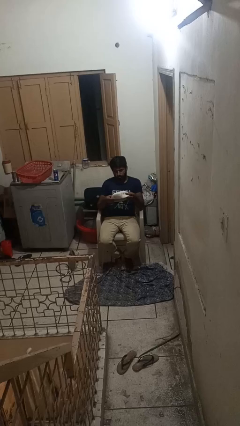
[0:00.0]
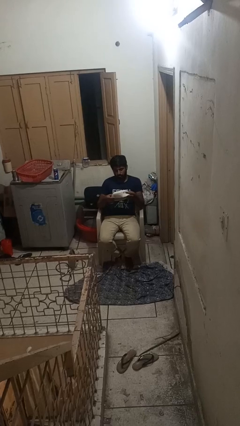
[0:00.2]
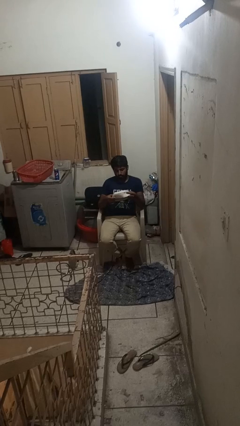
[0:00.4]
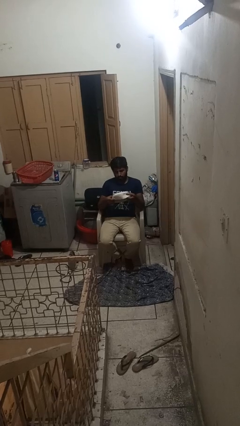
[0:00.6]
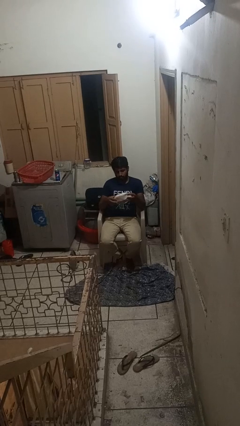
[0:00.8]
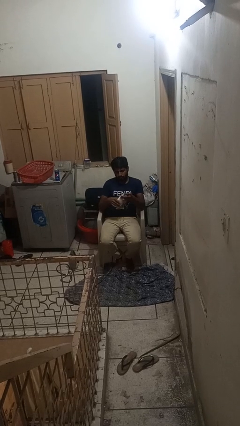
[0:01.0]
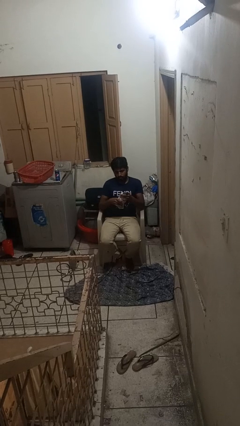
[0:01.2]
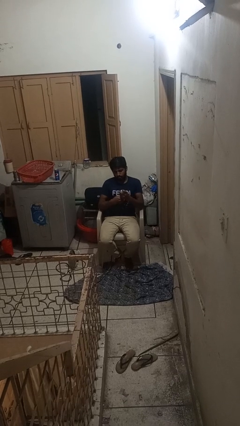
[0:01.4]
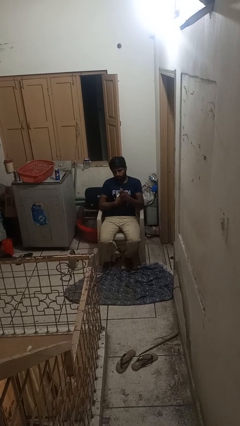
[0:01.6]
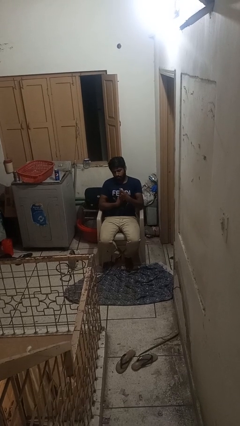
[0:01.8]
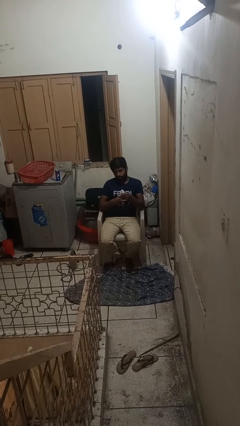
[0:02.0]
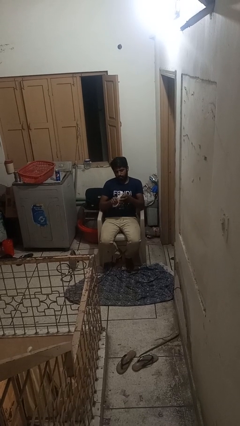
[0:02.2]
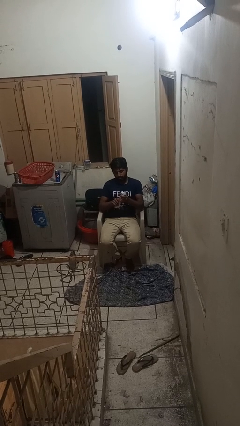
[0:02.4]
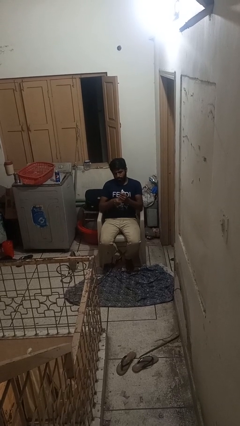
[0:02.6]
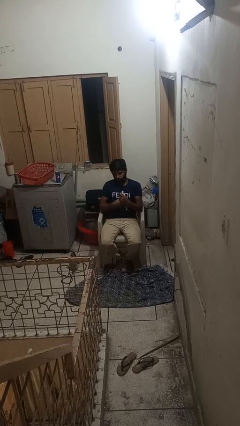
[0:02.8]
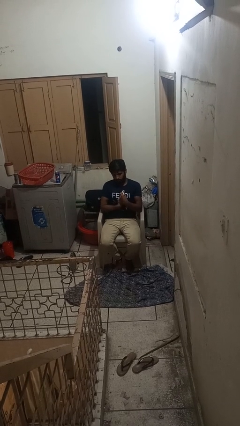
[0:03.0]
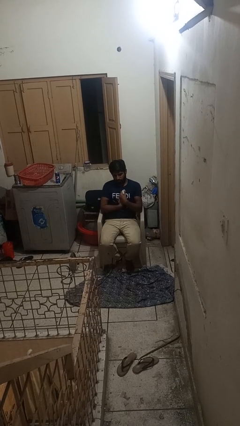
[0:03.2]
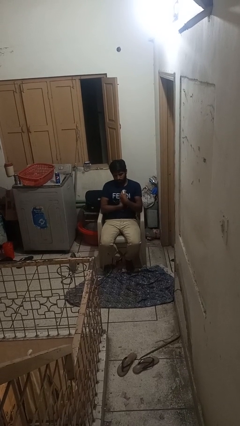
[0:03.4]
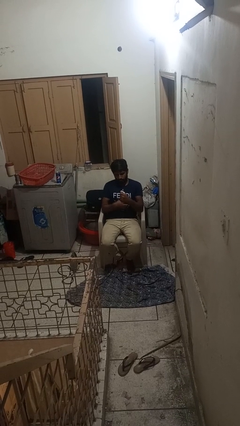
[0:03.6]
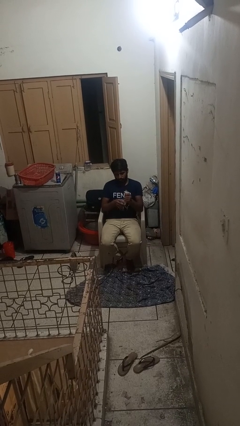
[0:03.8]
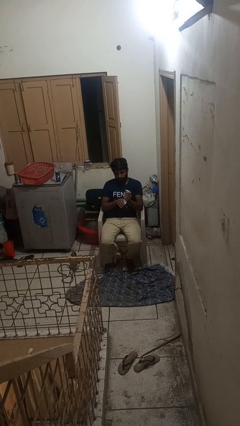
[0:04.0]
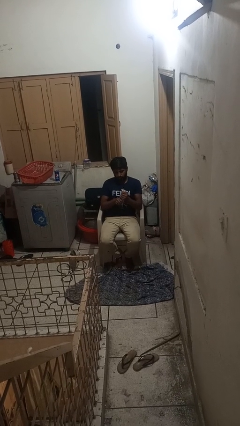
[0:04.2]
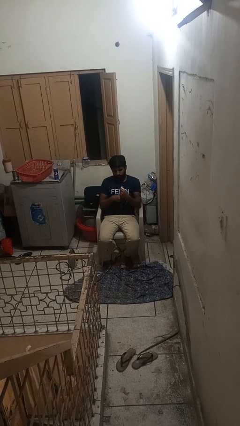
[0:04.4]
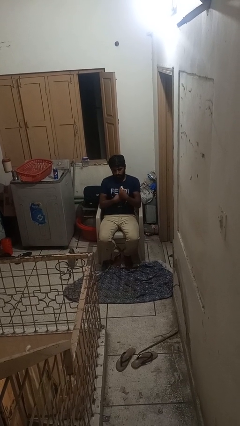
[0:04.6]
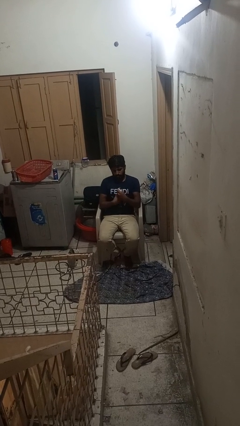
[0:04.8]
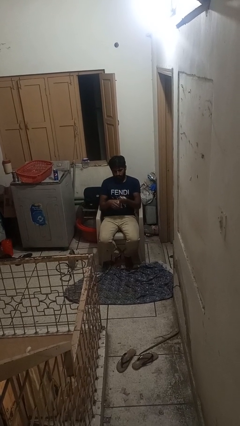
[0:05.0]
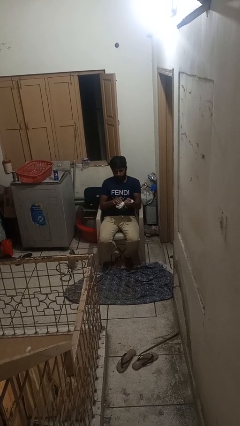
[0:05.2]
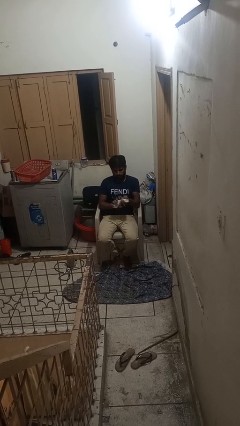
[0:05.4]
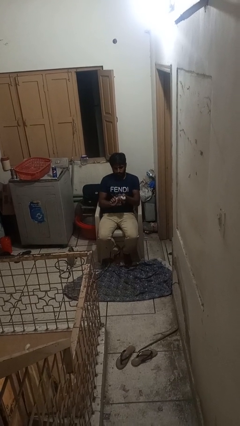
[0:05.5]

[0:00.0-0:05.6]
person squeezes object

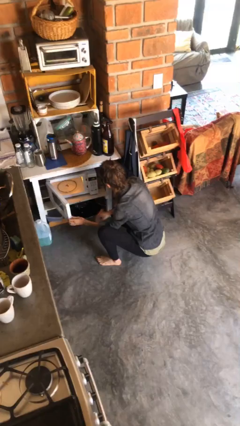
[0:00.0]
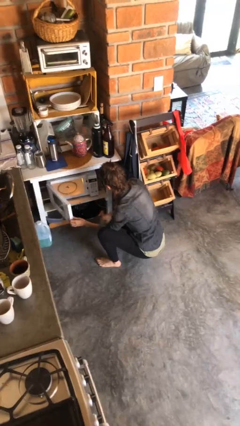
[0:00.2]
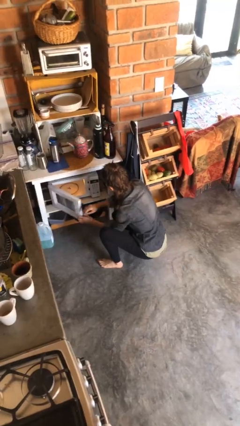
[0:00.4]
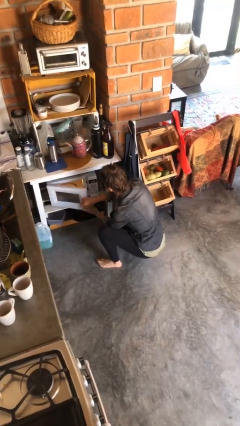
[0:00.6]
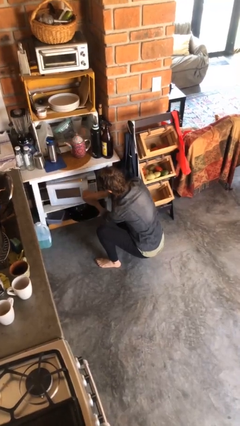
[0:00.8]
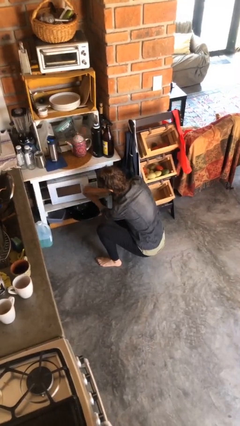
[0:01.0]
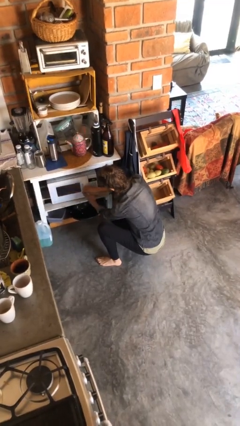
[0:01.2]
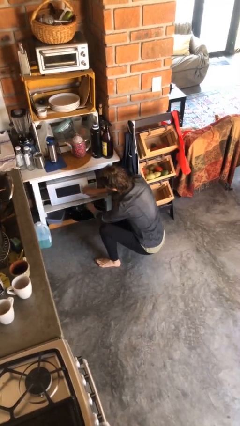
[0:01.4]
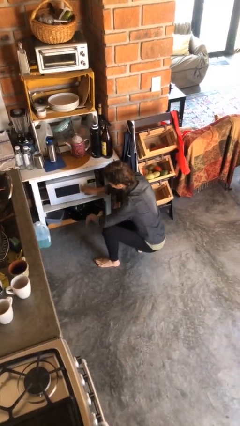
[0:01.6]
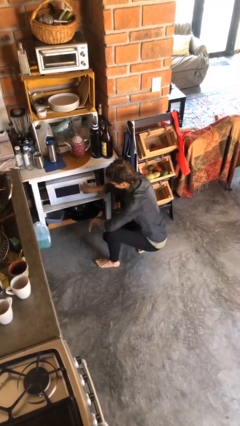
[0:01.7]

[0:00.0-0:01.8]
person closes microwave

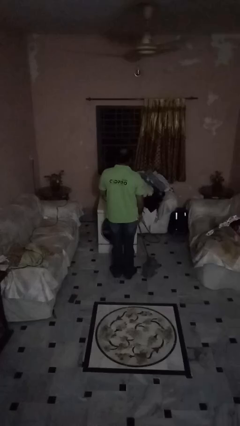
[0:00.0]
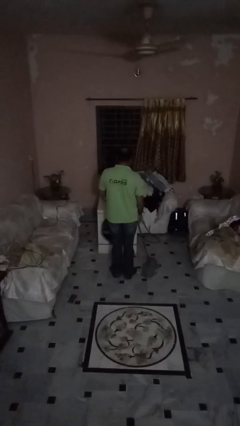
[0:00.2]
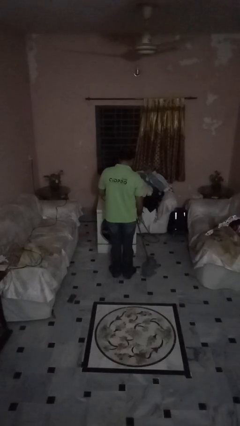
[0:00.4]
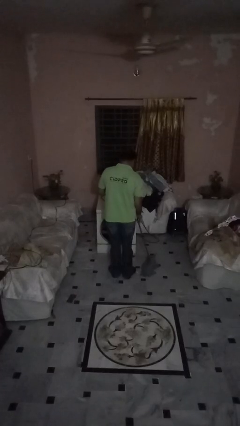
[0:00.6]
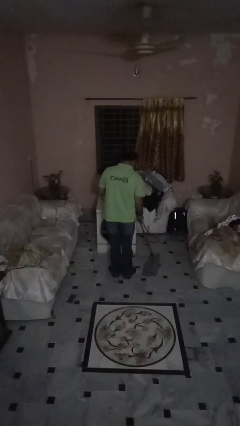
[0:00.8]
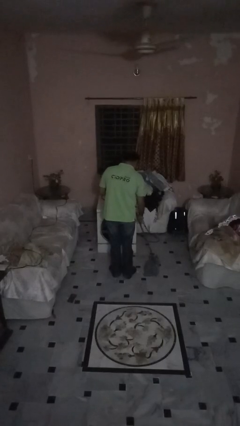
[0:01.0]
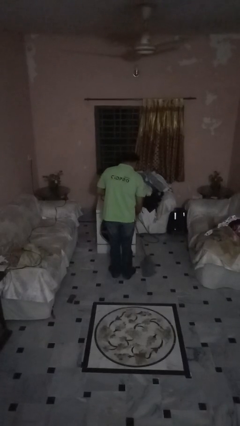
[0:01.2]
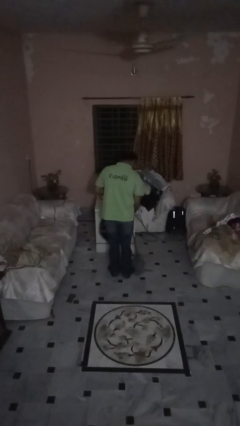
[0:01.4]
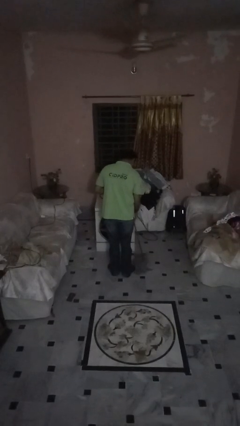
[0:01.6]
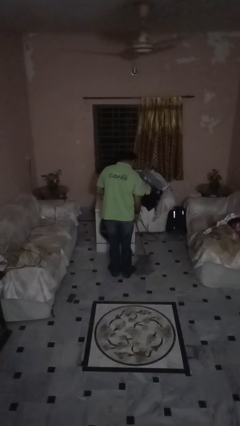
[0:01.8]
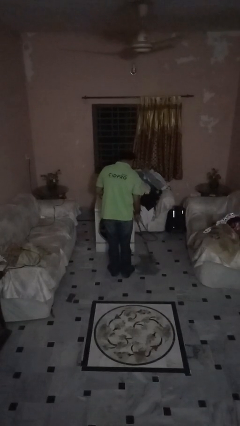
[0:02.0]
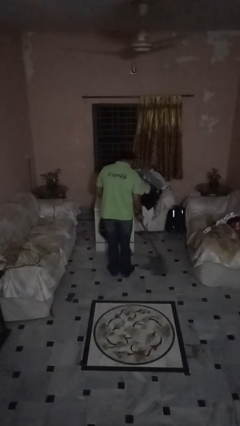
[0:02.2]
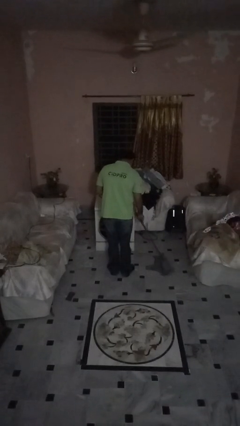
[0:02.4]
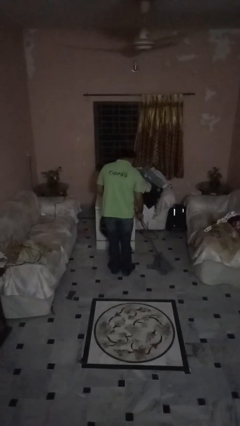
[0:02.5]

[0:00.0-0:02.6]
person mops

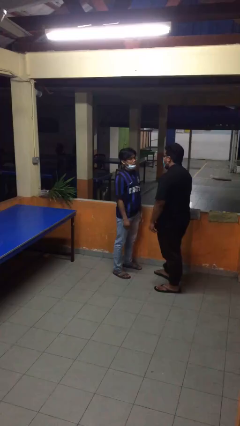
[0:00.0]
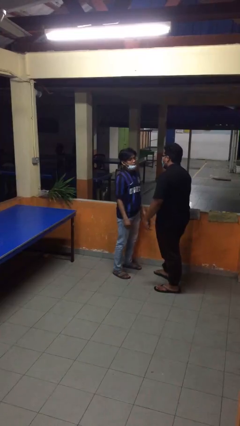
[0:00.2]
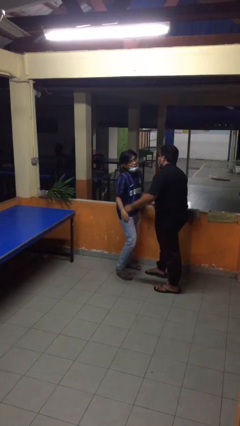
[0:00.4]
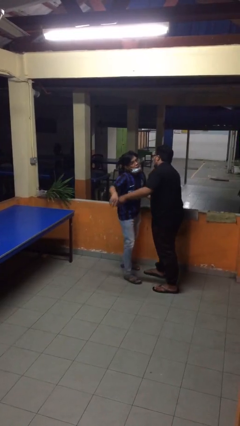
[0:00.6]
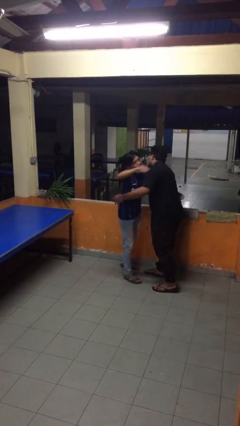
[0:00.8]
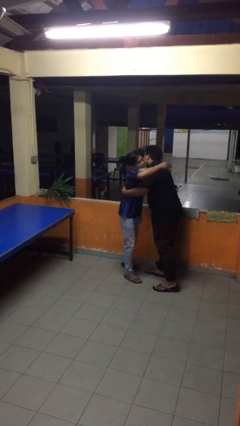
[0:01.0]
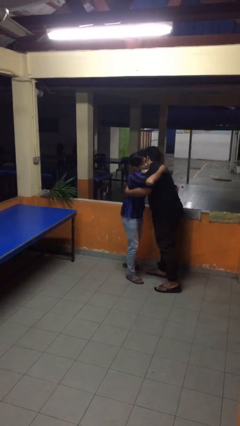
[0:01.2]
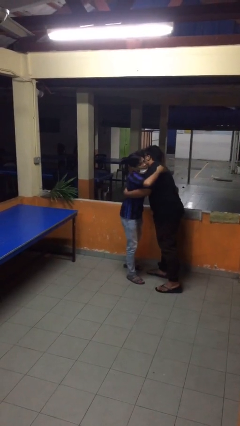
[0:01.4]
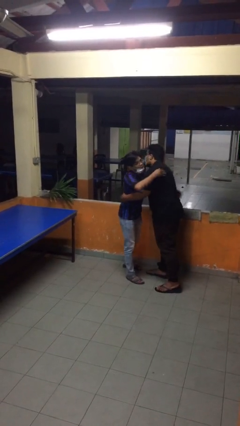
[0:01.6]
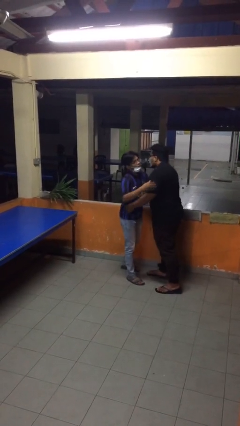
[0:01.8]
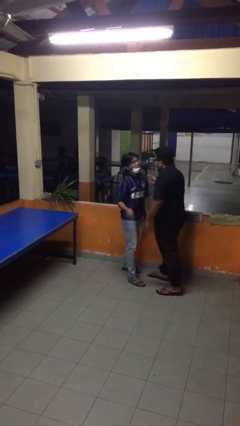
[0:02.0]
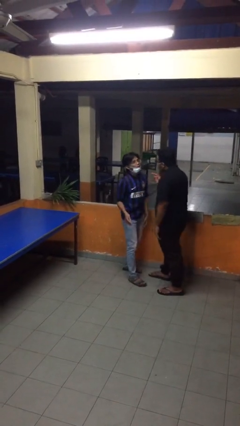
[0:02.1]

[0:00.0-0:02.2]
person embraces person

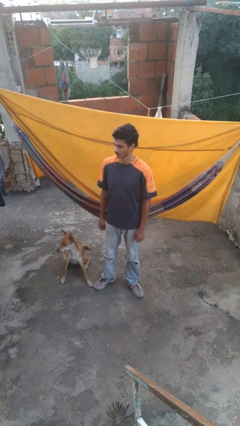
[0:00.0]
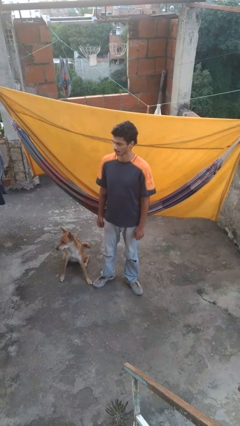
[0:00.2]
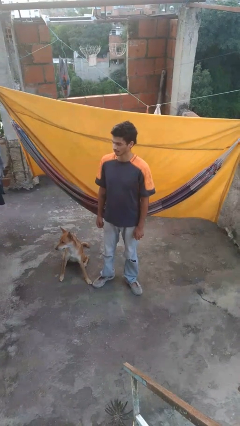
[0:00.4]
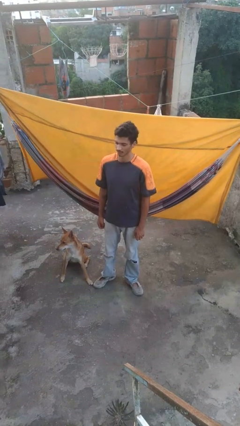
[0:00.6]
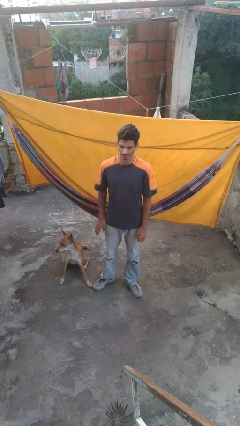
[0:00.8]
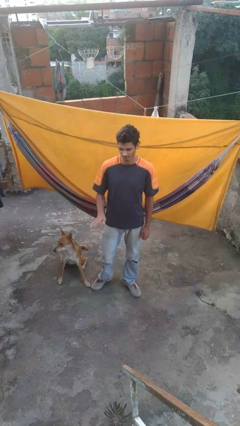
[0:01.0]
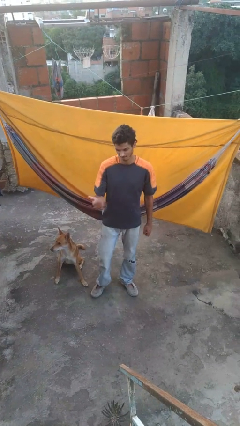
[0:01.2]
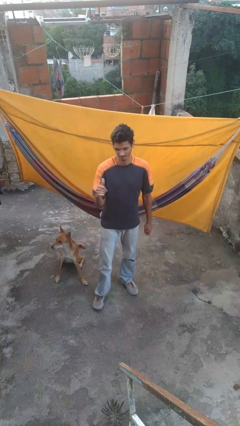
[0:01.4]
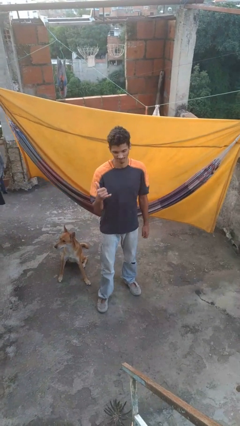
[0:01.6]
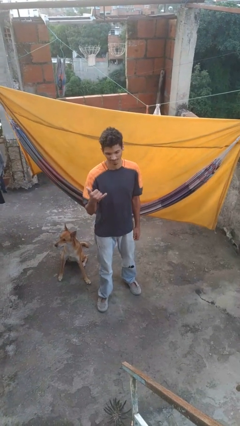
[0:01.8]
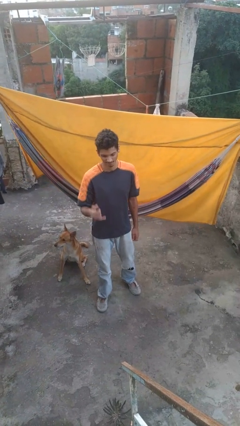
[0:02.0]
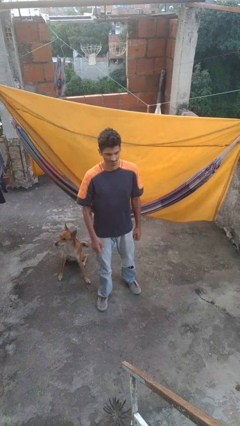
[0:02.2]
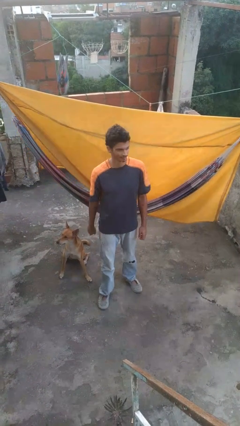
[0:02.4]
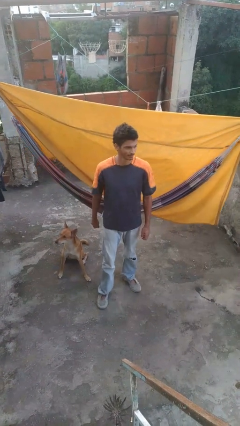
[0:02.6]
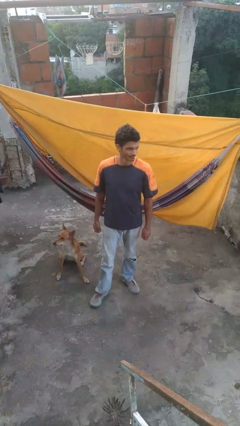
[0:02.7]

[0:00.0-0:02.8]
person gestures hang loose

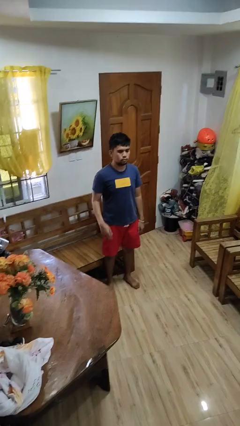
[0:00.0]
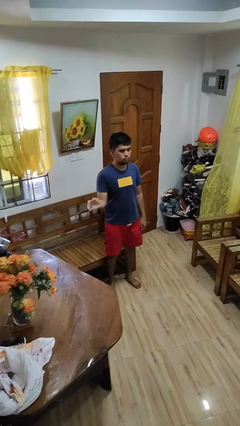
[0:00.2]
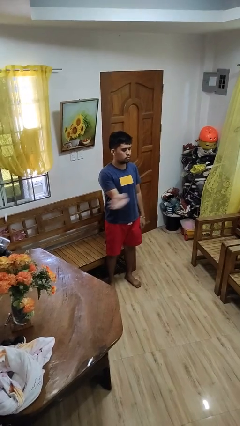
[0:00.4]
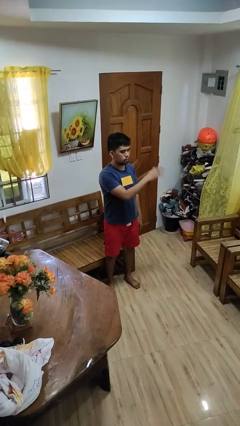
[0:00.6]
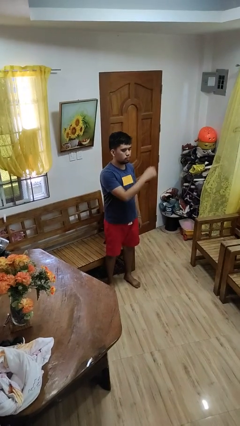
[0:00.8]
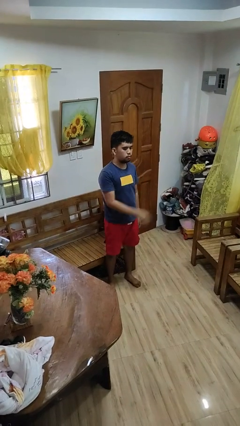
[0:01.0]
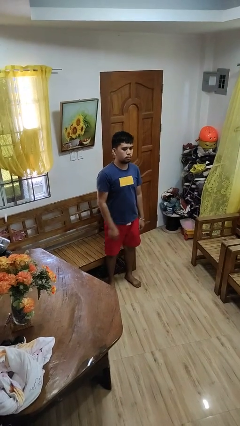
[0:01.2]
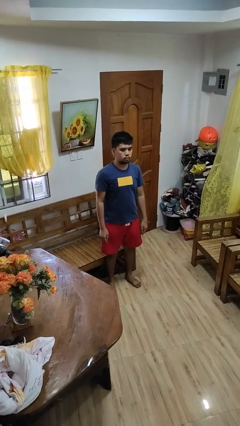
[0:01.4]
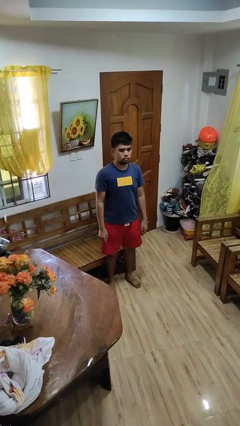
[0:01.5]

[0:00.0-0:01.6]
person gestures swipe left

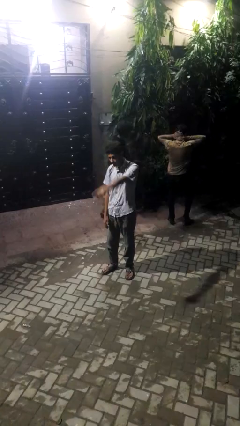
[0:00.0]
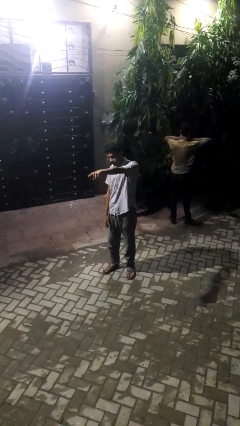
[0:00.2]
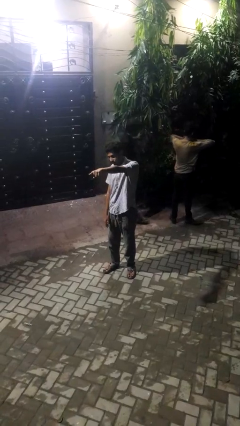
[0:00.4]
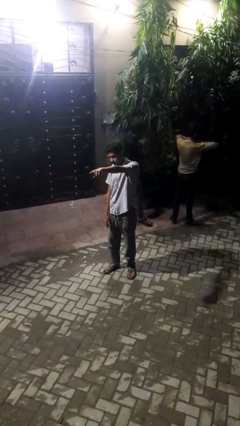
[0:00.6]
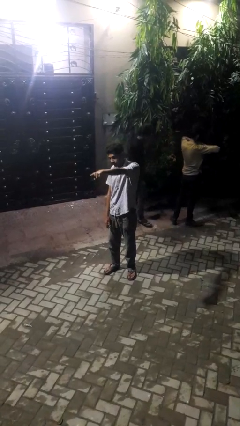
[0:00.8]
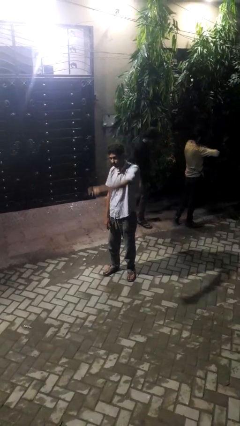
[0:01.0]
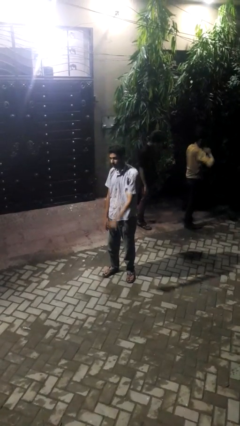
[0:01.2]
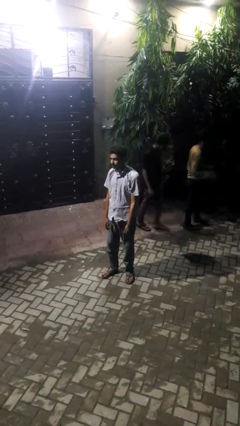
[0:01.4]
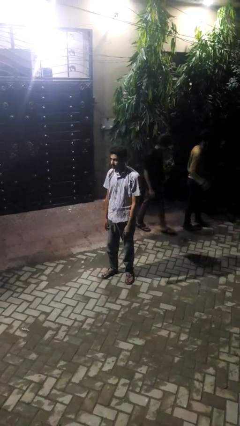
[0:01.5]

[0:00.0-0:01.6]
person points at person
